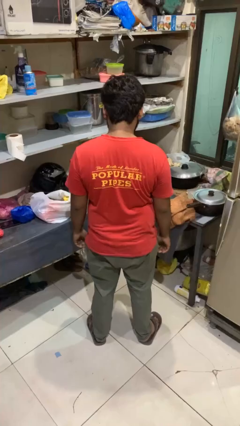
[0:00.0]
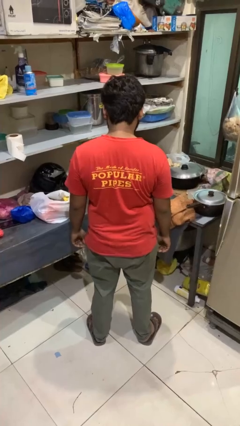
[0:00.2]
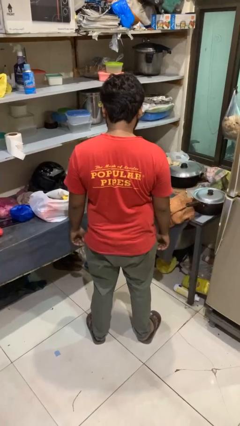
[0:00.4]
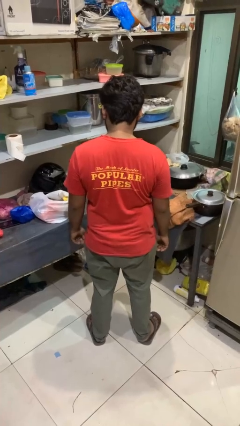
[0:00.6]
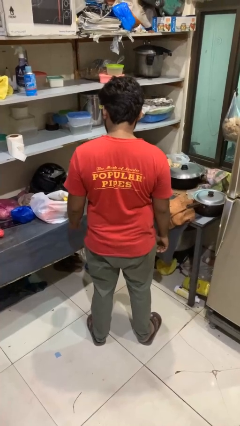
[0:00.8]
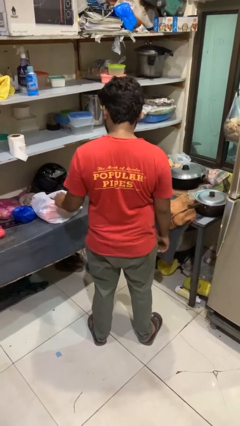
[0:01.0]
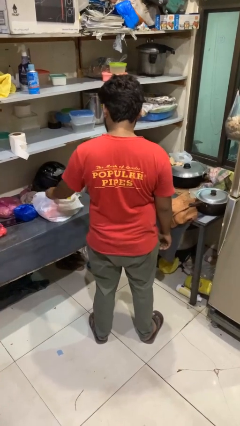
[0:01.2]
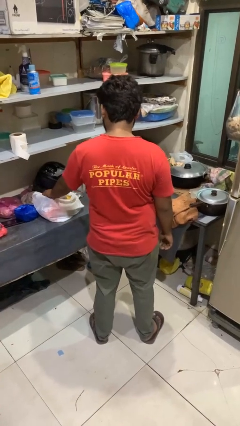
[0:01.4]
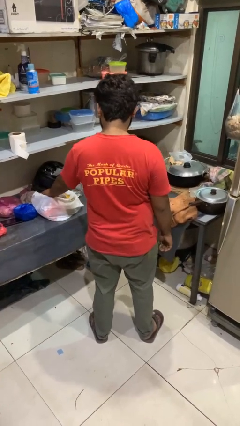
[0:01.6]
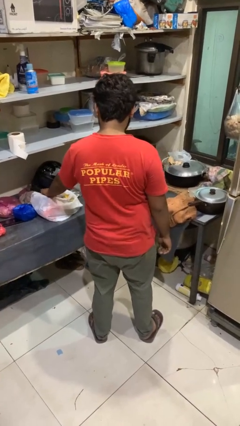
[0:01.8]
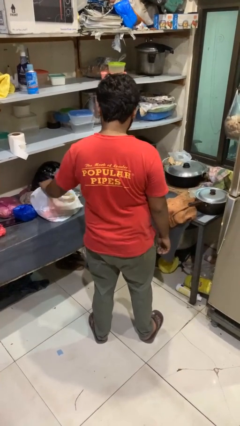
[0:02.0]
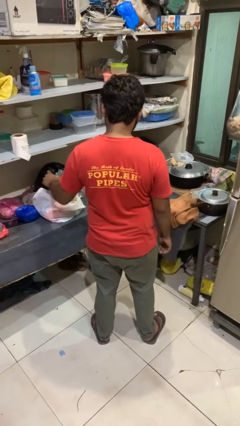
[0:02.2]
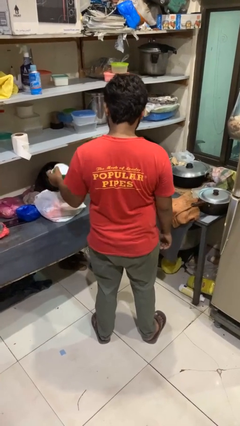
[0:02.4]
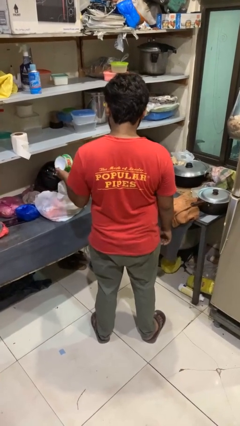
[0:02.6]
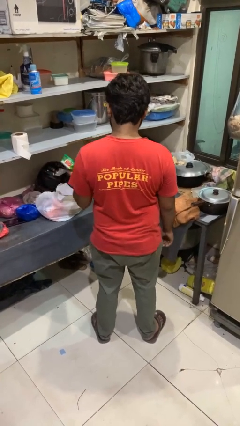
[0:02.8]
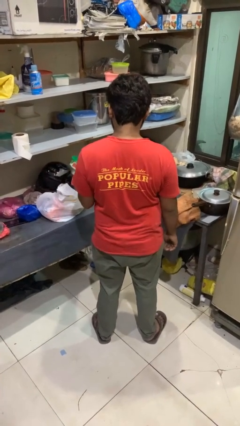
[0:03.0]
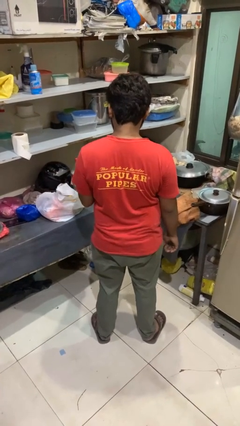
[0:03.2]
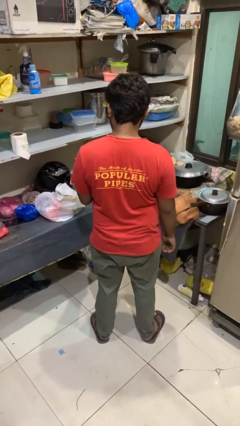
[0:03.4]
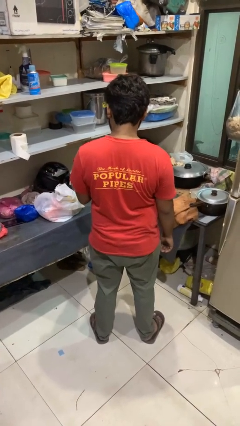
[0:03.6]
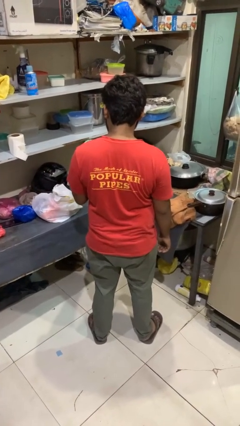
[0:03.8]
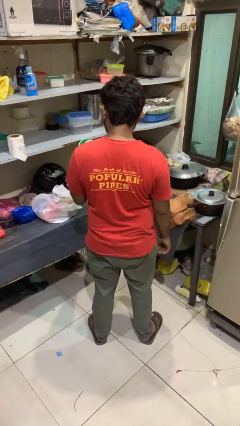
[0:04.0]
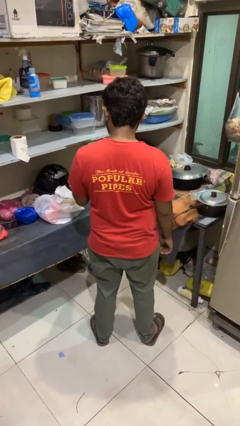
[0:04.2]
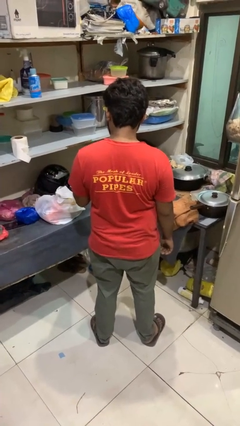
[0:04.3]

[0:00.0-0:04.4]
person takes object from bag

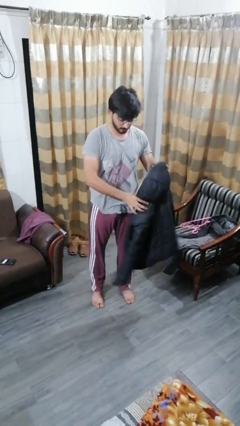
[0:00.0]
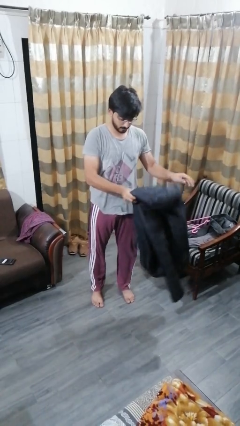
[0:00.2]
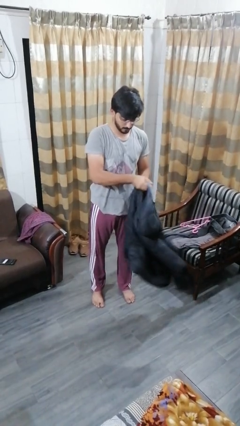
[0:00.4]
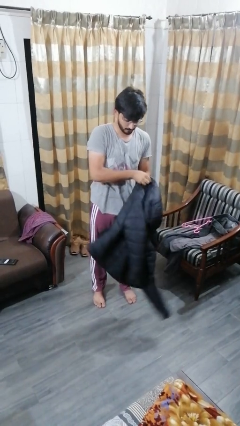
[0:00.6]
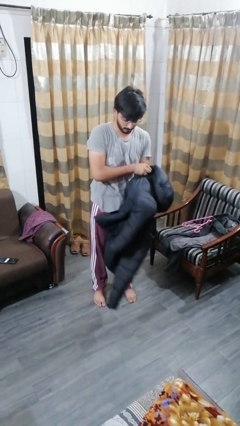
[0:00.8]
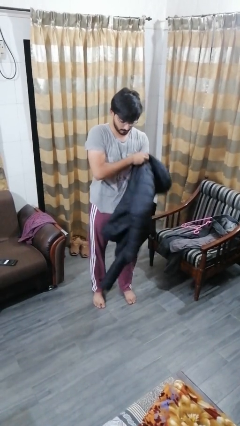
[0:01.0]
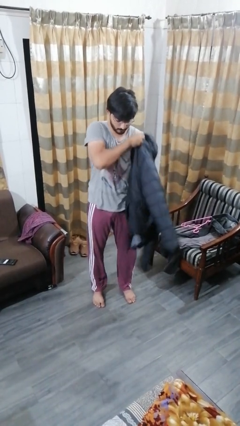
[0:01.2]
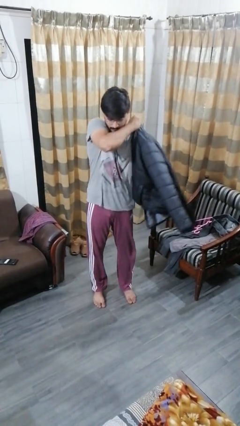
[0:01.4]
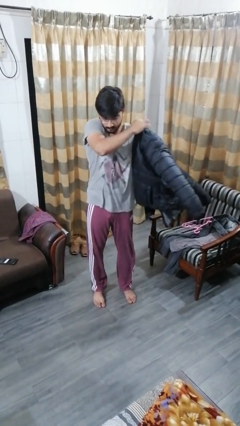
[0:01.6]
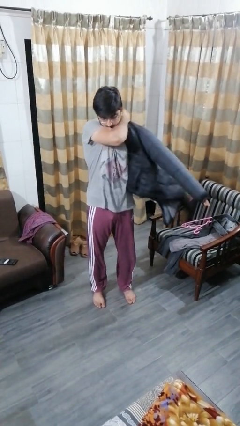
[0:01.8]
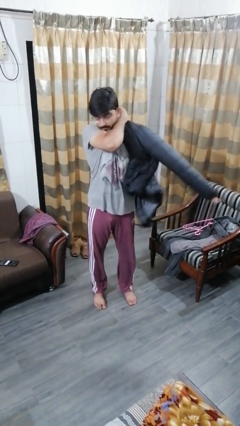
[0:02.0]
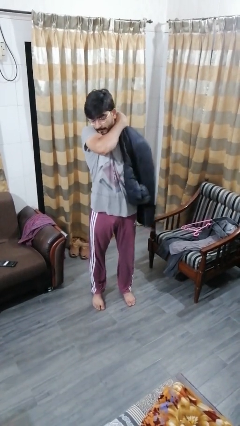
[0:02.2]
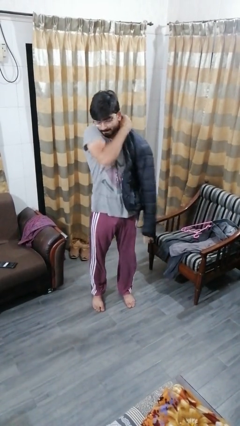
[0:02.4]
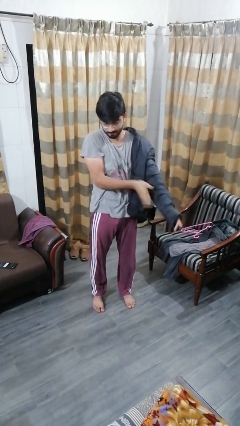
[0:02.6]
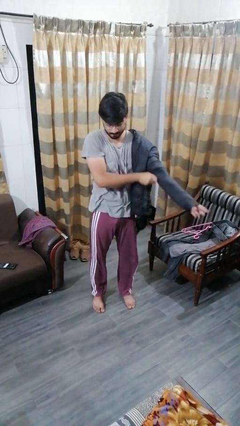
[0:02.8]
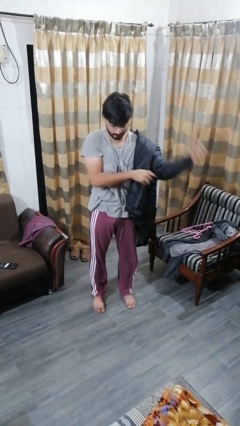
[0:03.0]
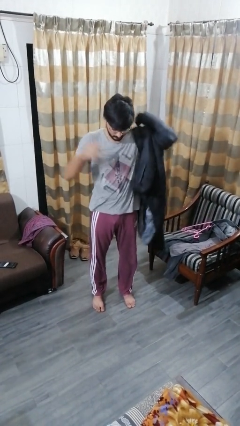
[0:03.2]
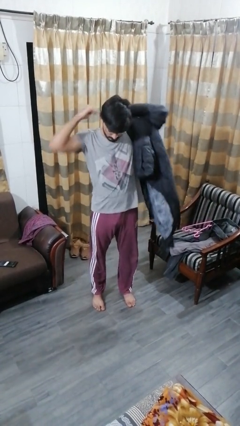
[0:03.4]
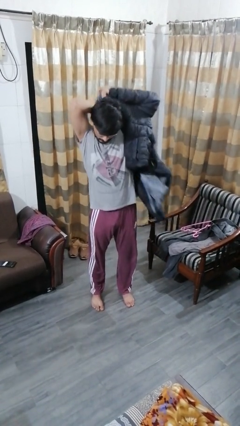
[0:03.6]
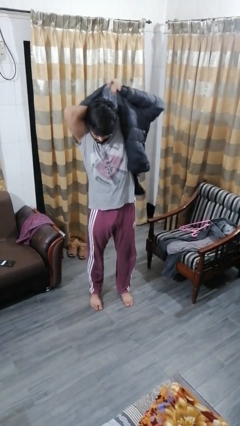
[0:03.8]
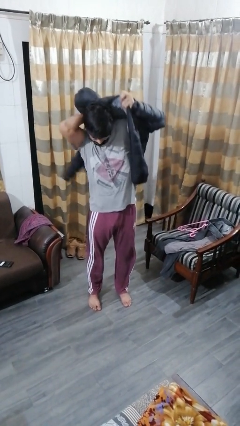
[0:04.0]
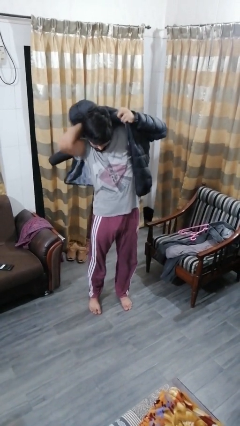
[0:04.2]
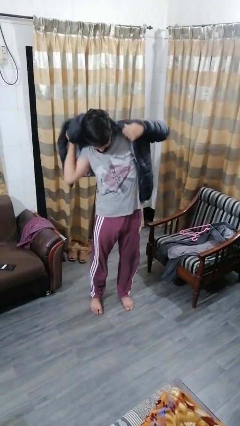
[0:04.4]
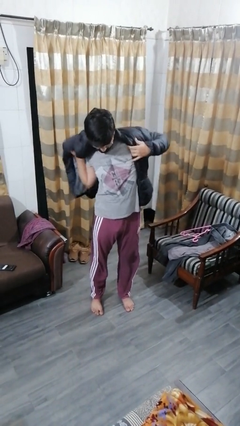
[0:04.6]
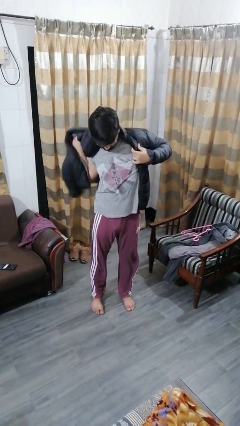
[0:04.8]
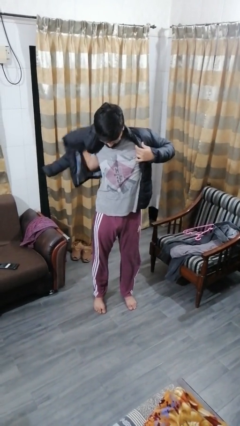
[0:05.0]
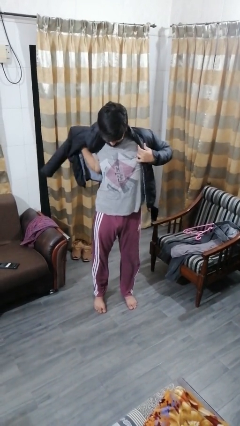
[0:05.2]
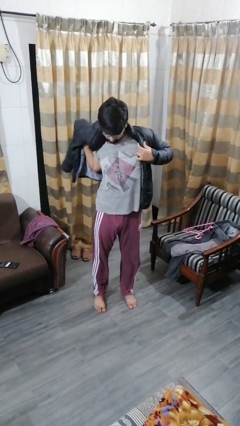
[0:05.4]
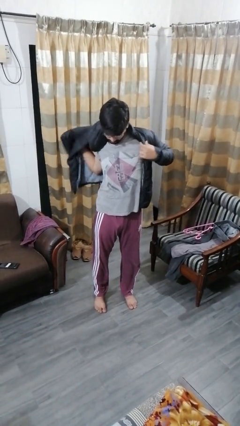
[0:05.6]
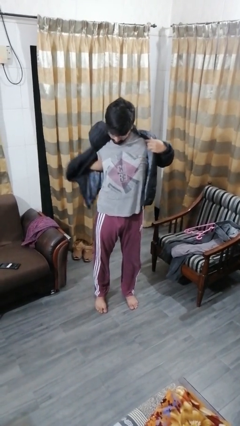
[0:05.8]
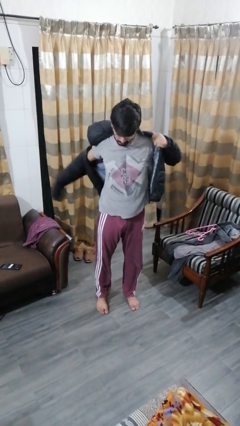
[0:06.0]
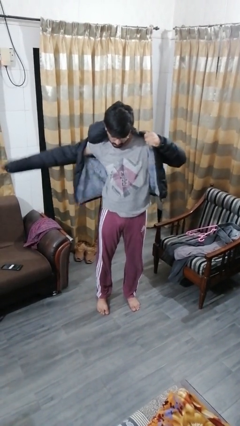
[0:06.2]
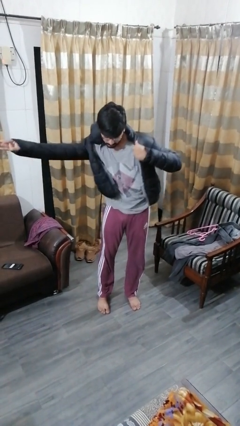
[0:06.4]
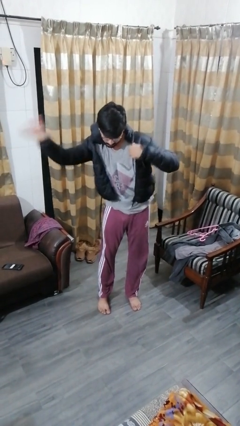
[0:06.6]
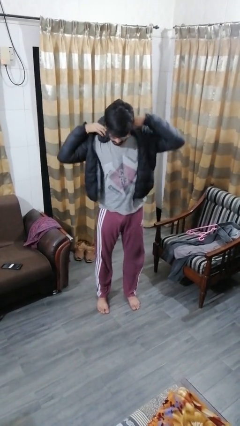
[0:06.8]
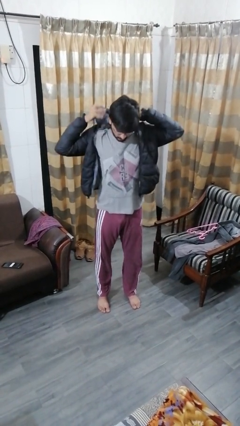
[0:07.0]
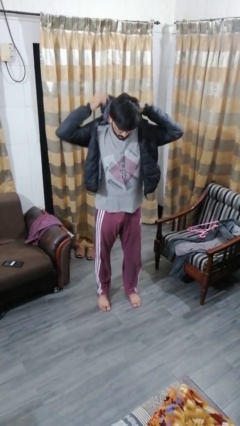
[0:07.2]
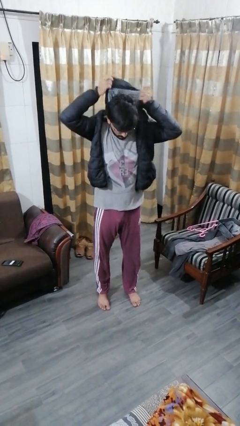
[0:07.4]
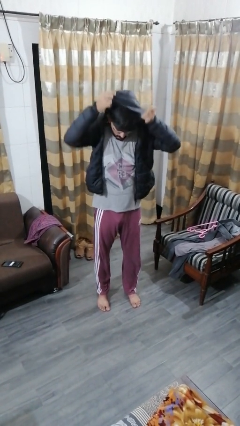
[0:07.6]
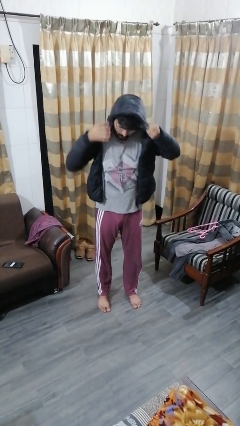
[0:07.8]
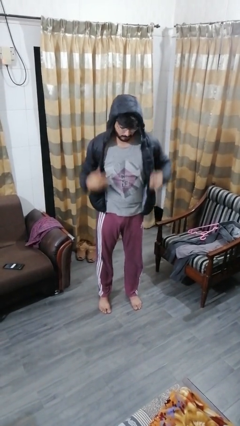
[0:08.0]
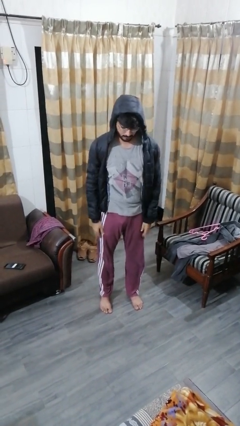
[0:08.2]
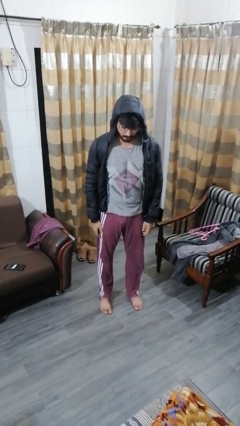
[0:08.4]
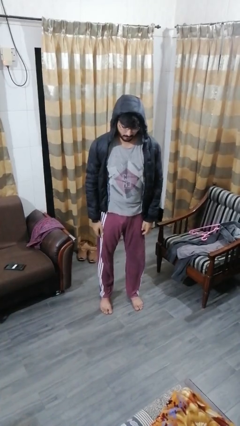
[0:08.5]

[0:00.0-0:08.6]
person puts on hoodie

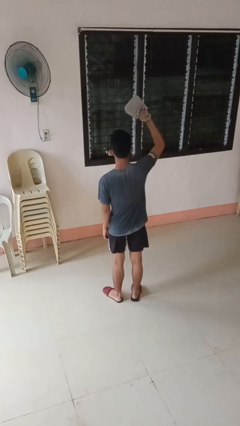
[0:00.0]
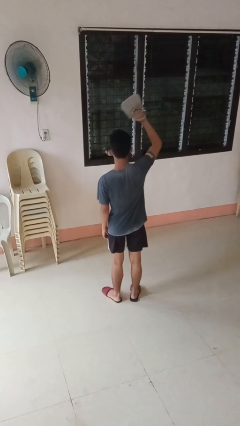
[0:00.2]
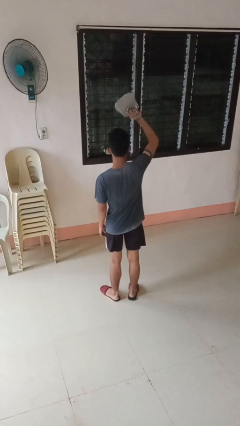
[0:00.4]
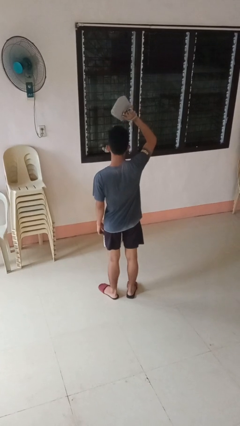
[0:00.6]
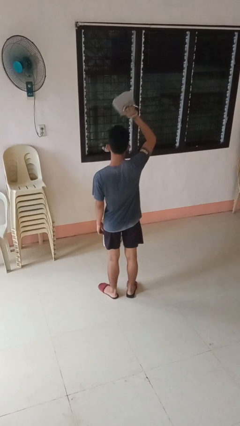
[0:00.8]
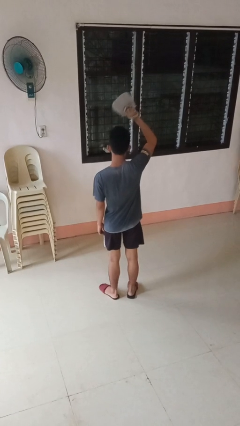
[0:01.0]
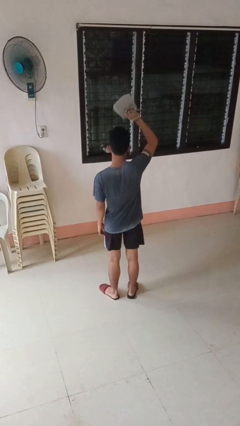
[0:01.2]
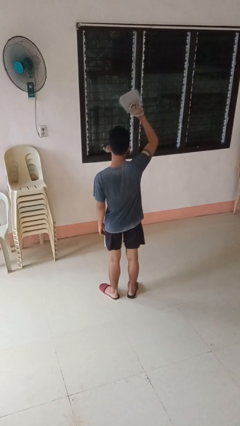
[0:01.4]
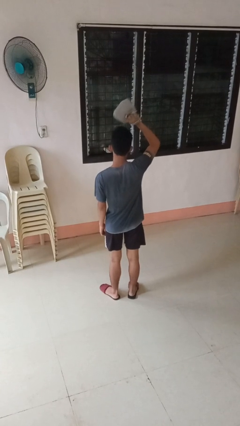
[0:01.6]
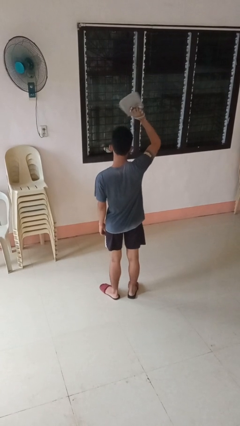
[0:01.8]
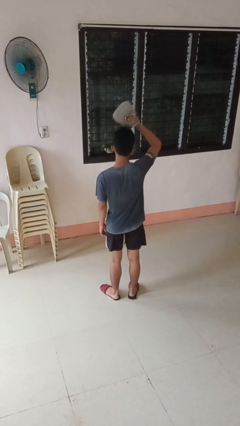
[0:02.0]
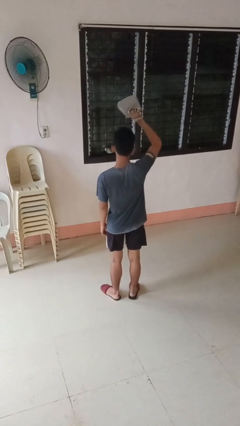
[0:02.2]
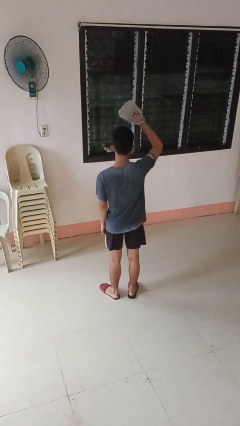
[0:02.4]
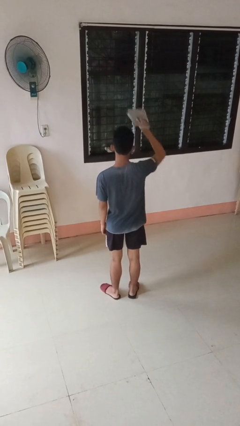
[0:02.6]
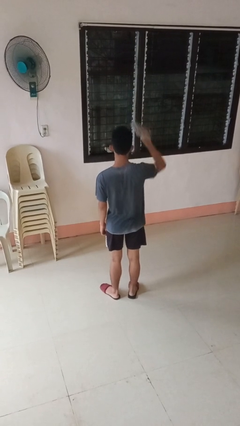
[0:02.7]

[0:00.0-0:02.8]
person holds object above head

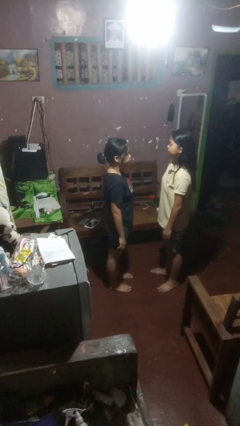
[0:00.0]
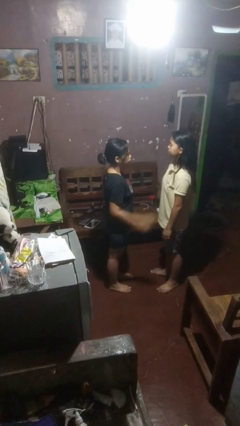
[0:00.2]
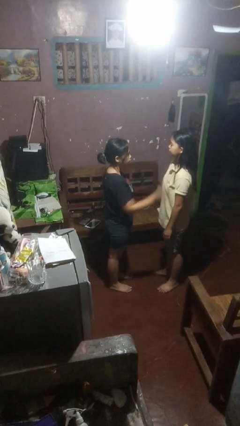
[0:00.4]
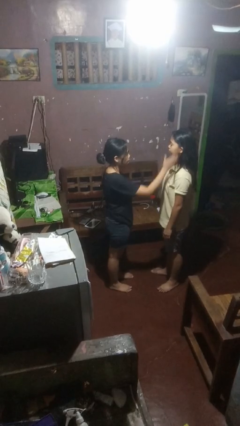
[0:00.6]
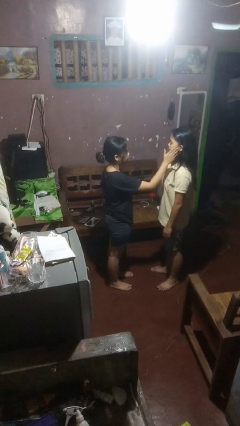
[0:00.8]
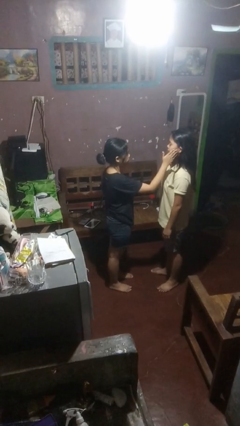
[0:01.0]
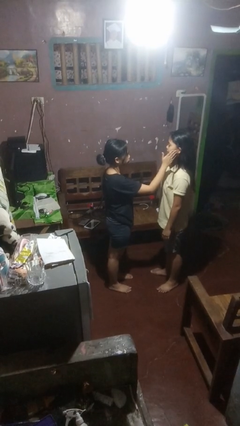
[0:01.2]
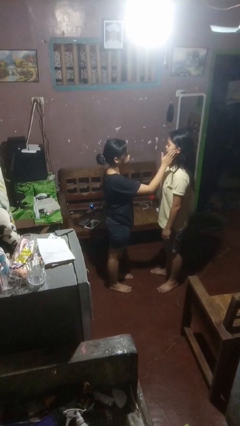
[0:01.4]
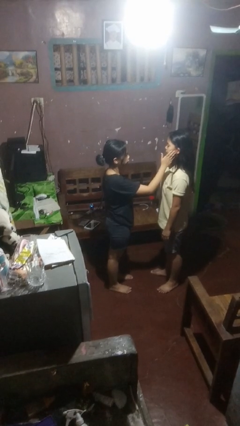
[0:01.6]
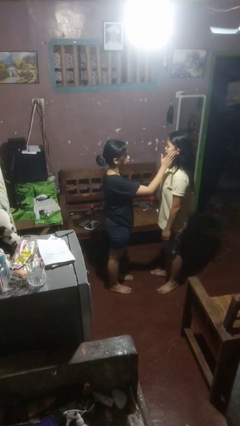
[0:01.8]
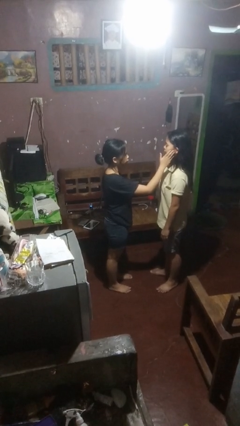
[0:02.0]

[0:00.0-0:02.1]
person touches face of person
